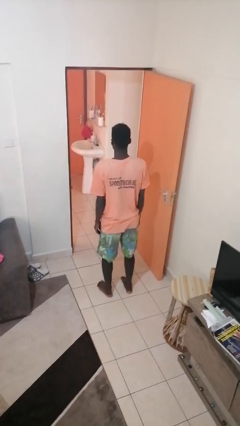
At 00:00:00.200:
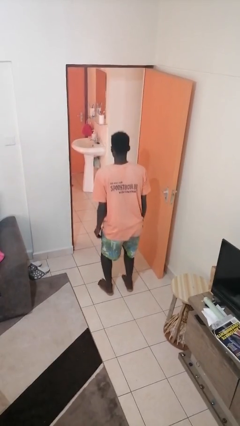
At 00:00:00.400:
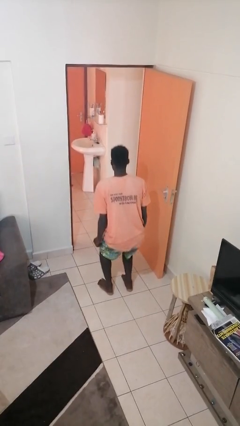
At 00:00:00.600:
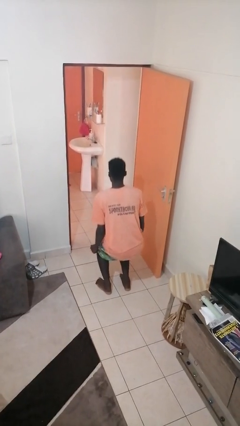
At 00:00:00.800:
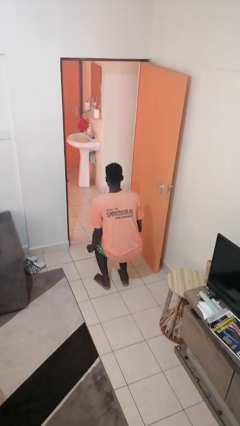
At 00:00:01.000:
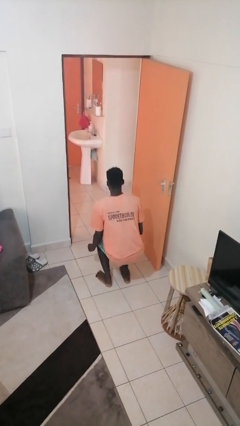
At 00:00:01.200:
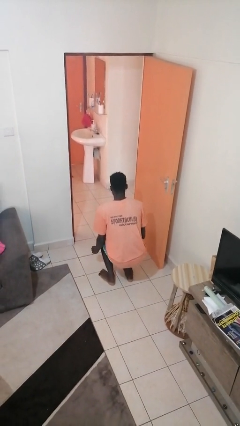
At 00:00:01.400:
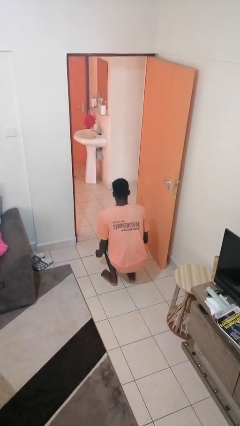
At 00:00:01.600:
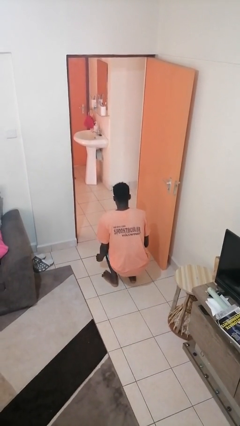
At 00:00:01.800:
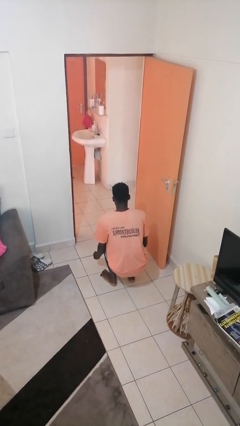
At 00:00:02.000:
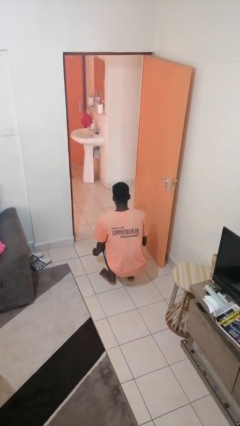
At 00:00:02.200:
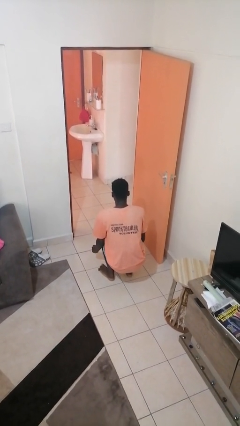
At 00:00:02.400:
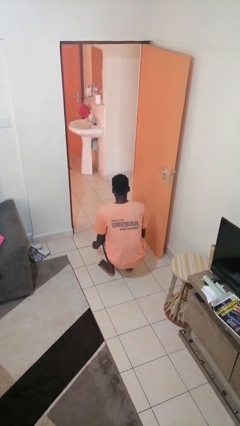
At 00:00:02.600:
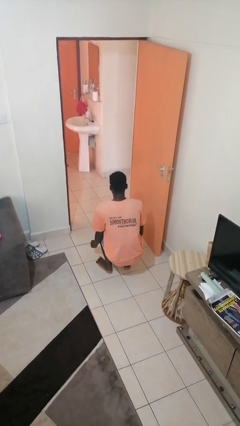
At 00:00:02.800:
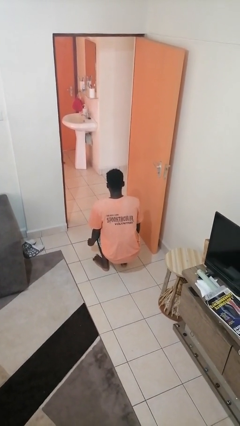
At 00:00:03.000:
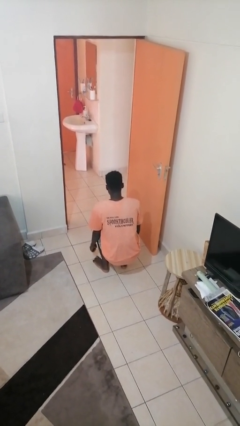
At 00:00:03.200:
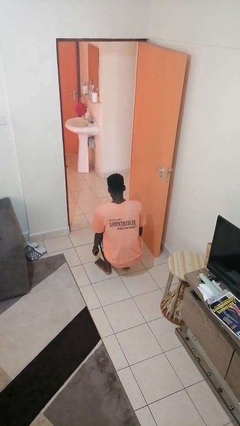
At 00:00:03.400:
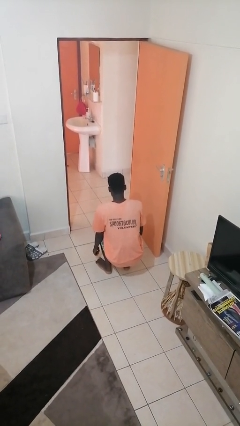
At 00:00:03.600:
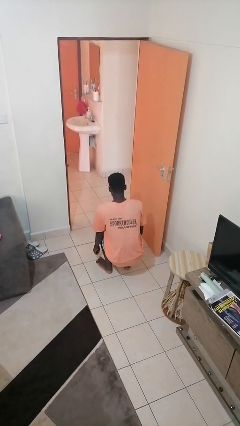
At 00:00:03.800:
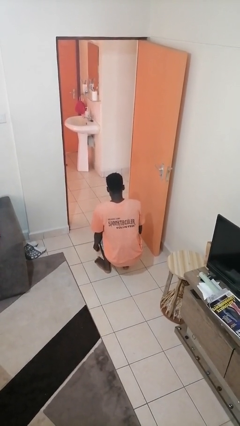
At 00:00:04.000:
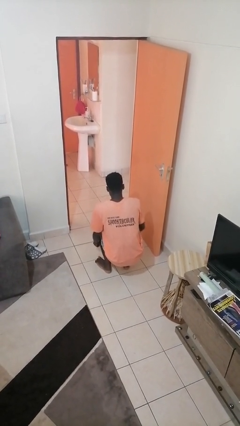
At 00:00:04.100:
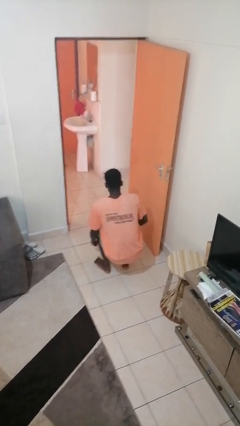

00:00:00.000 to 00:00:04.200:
person squats

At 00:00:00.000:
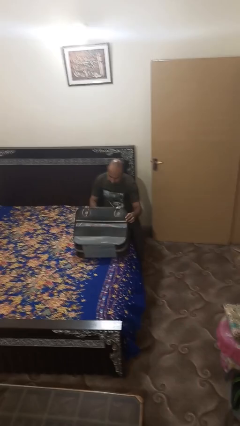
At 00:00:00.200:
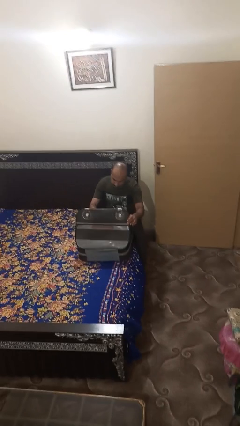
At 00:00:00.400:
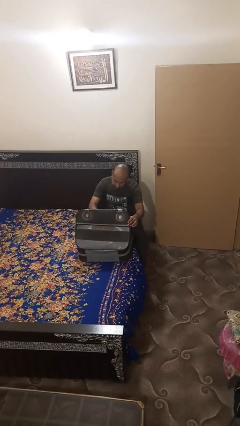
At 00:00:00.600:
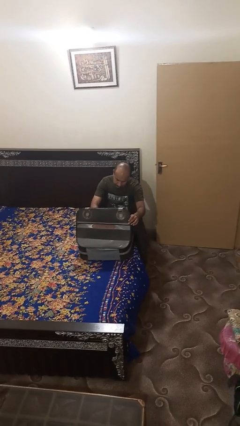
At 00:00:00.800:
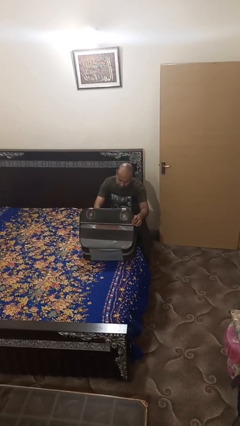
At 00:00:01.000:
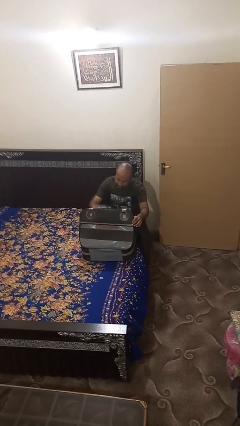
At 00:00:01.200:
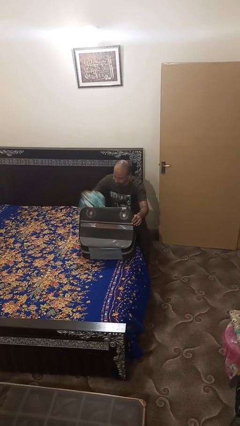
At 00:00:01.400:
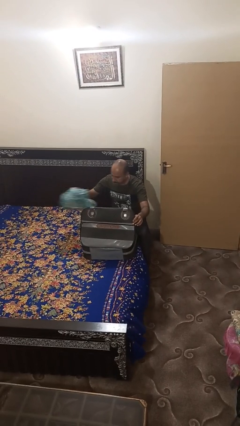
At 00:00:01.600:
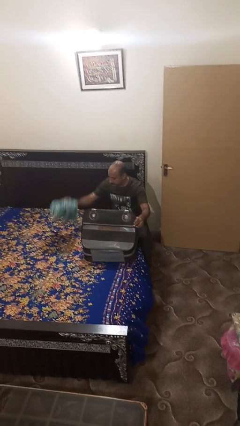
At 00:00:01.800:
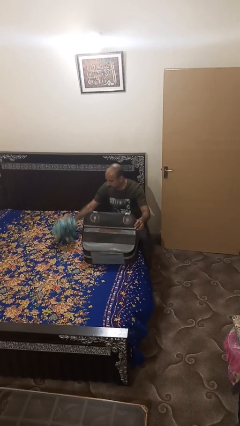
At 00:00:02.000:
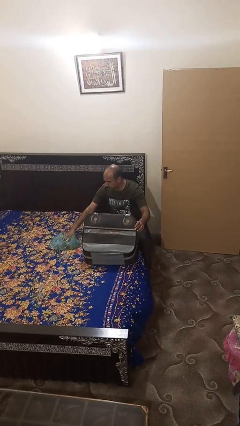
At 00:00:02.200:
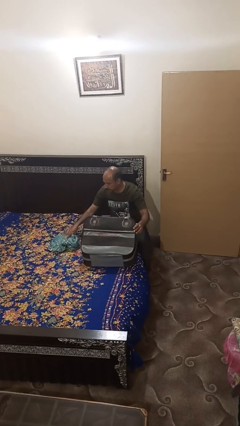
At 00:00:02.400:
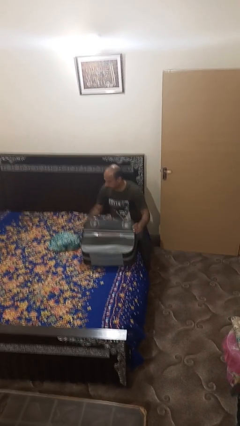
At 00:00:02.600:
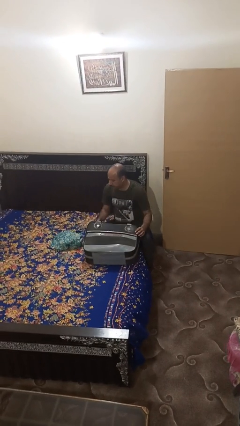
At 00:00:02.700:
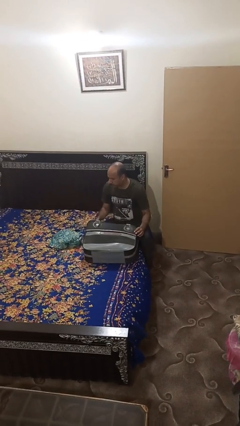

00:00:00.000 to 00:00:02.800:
person unloads clothes from suitcase

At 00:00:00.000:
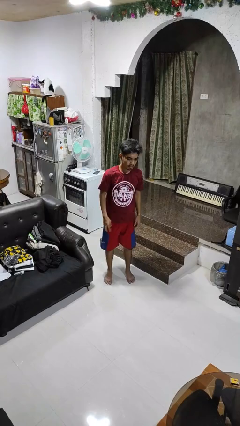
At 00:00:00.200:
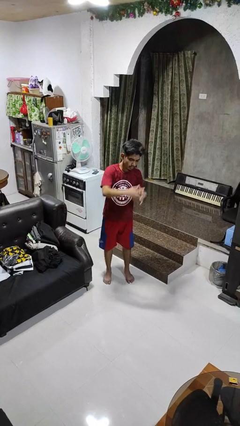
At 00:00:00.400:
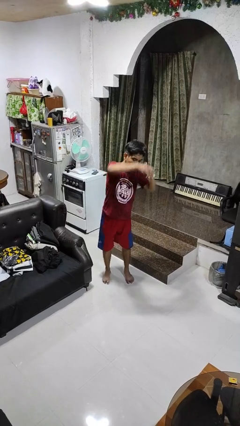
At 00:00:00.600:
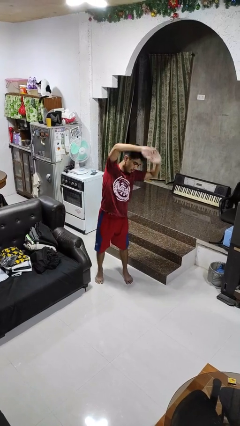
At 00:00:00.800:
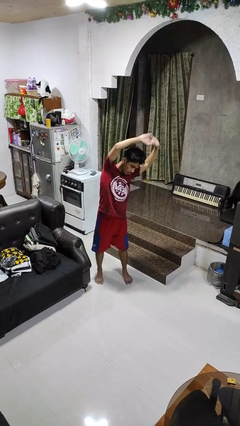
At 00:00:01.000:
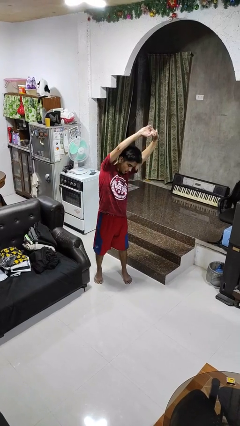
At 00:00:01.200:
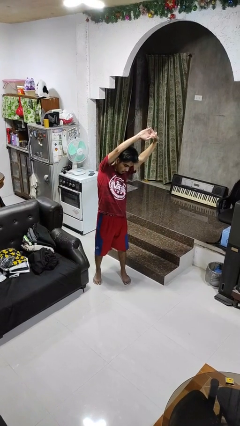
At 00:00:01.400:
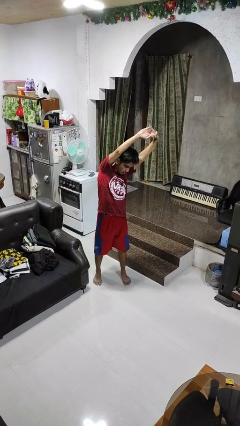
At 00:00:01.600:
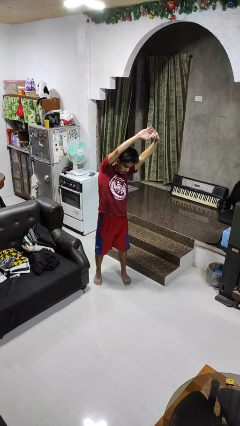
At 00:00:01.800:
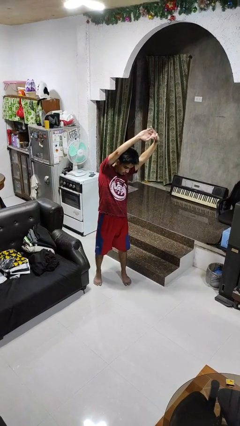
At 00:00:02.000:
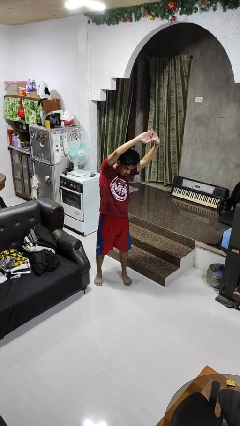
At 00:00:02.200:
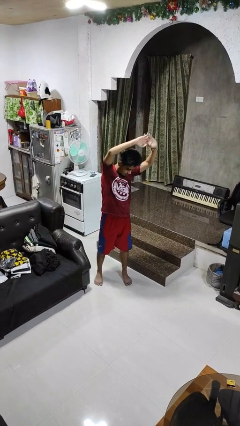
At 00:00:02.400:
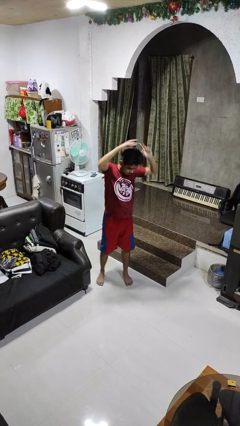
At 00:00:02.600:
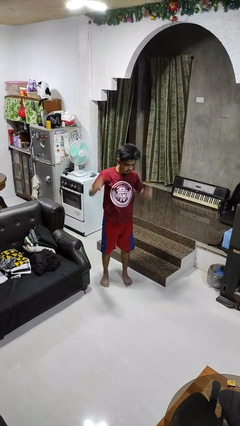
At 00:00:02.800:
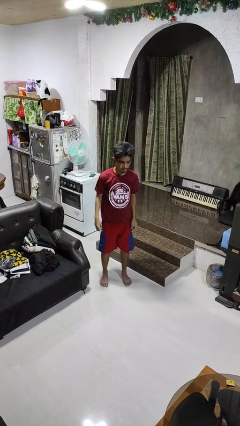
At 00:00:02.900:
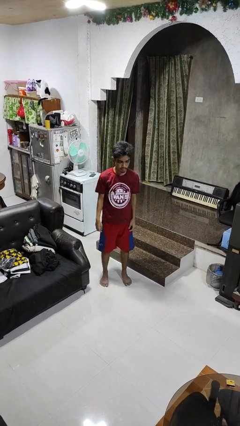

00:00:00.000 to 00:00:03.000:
person stretches arms over head

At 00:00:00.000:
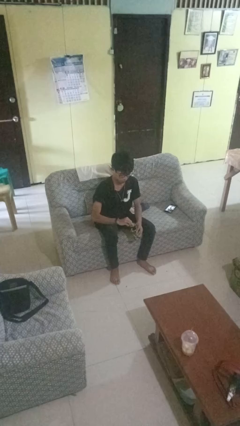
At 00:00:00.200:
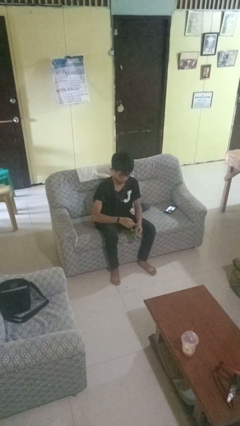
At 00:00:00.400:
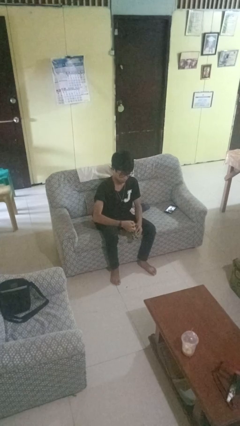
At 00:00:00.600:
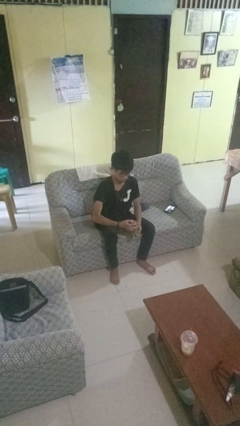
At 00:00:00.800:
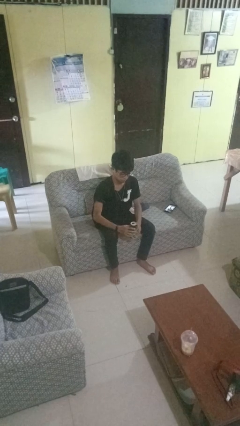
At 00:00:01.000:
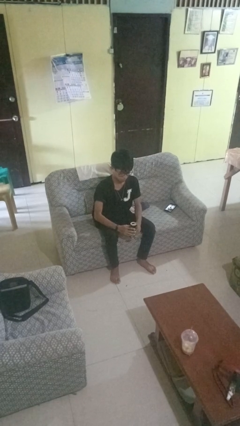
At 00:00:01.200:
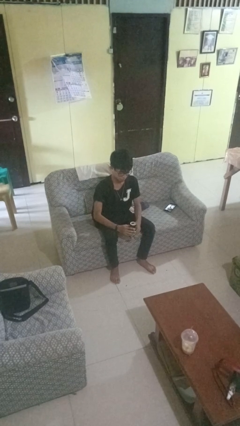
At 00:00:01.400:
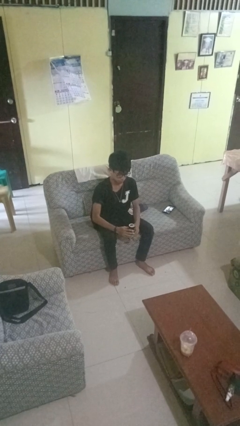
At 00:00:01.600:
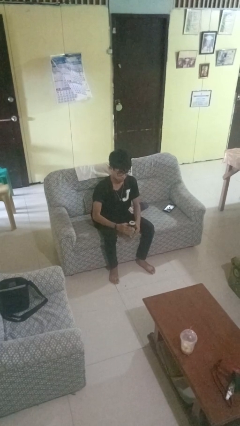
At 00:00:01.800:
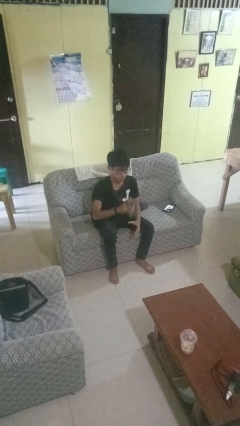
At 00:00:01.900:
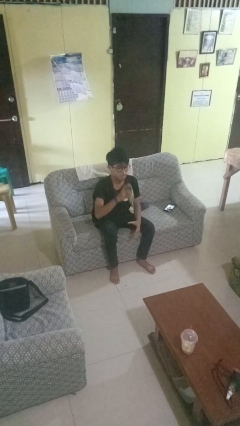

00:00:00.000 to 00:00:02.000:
person opens beverage can

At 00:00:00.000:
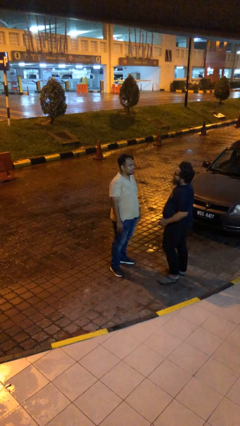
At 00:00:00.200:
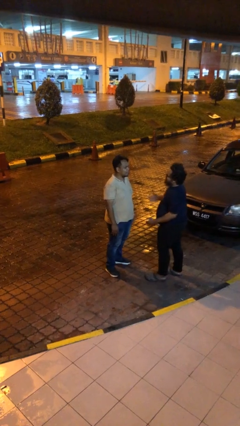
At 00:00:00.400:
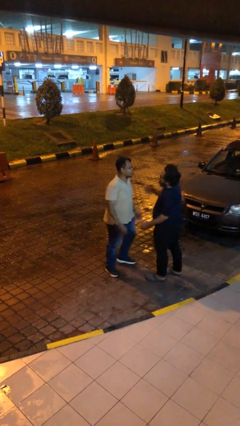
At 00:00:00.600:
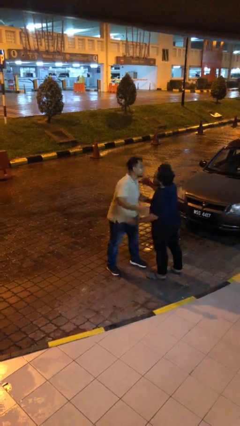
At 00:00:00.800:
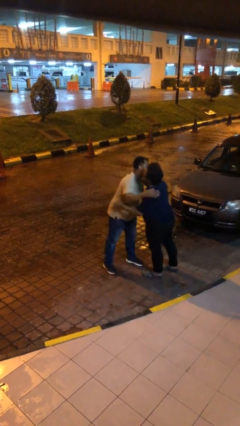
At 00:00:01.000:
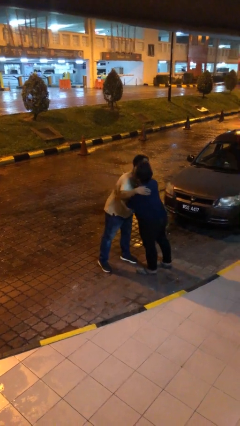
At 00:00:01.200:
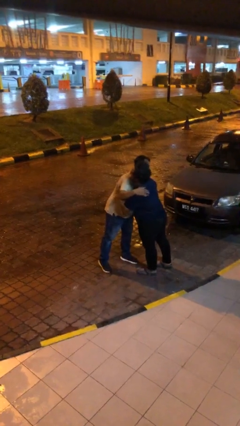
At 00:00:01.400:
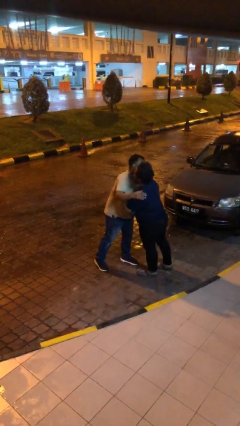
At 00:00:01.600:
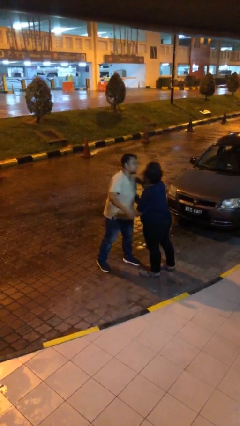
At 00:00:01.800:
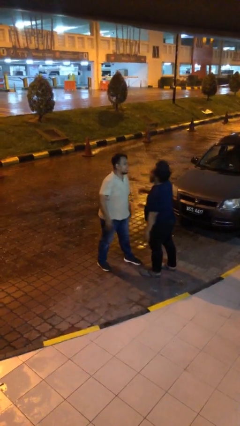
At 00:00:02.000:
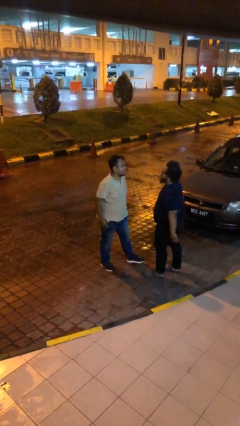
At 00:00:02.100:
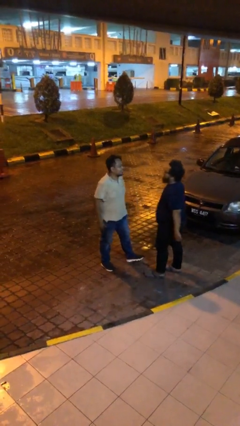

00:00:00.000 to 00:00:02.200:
person embraces person

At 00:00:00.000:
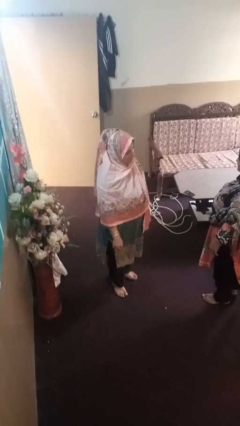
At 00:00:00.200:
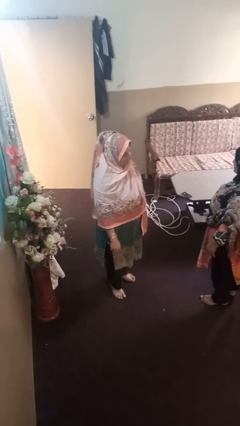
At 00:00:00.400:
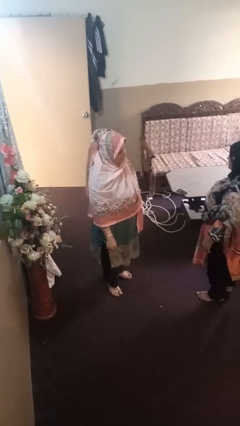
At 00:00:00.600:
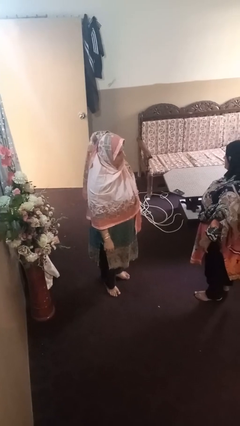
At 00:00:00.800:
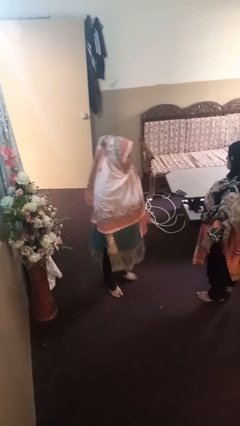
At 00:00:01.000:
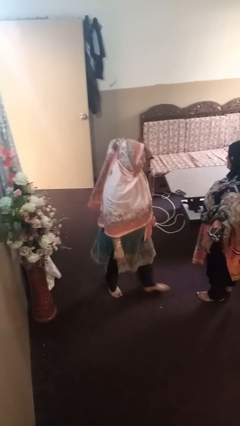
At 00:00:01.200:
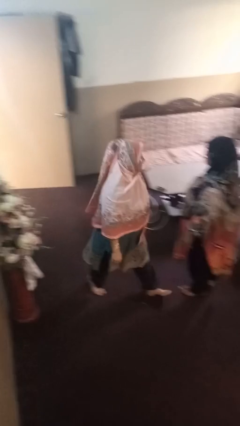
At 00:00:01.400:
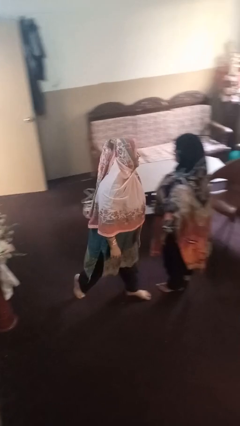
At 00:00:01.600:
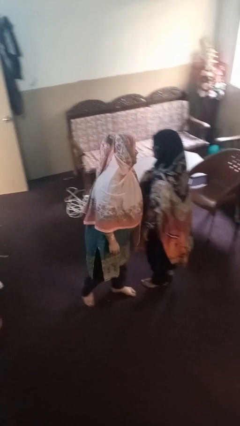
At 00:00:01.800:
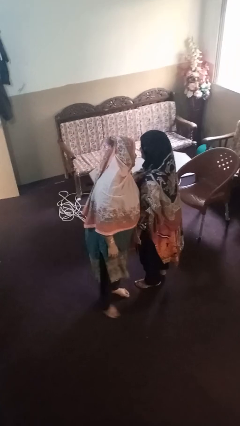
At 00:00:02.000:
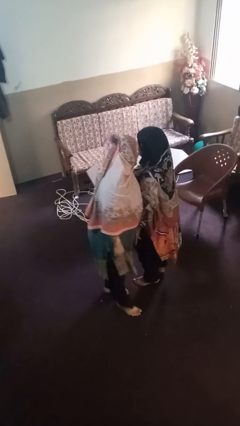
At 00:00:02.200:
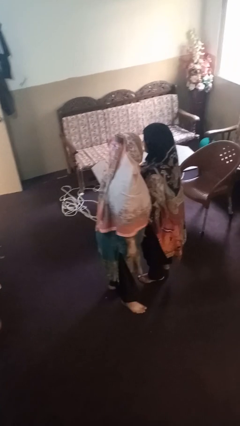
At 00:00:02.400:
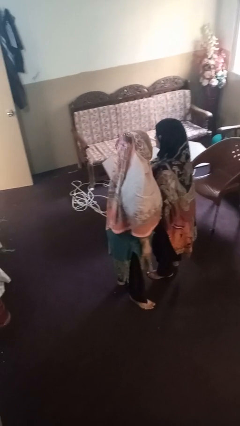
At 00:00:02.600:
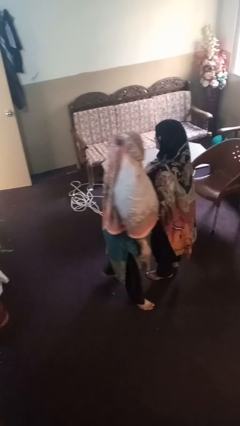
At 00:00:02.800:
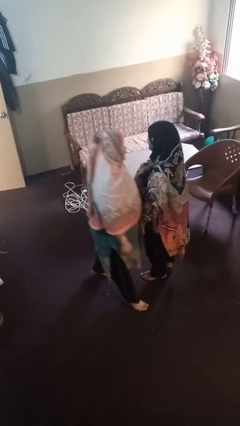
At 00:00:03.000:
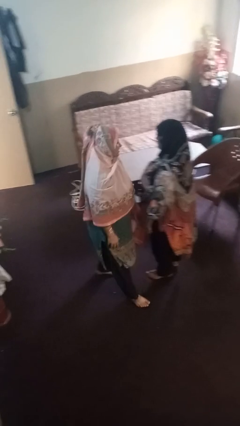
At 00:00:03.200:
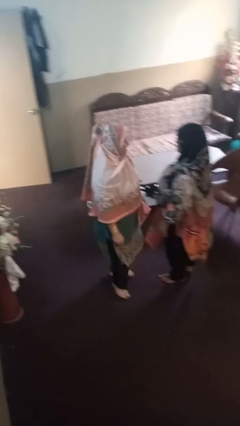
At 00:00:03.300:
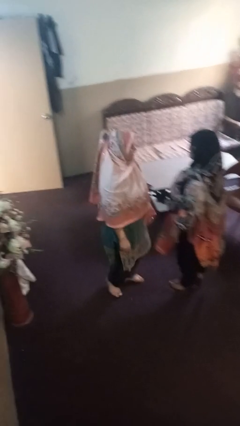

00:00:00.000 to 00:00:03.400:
person laughs with person
